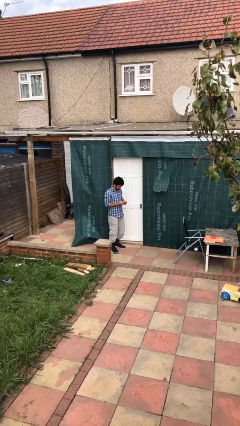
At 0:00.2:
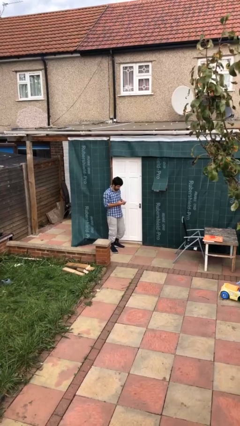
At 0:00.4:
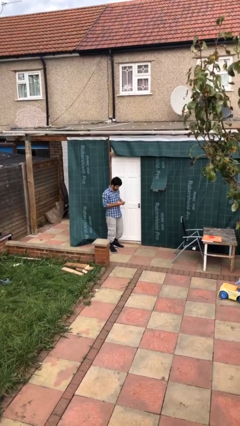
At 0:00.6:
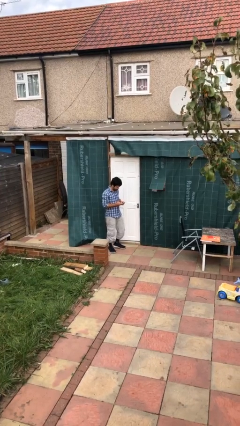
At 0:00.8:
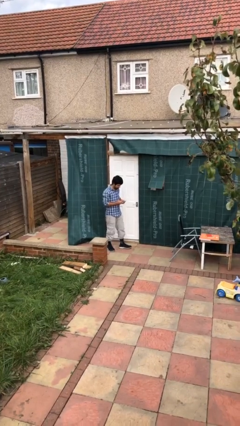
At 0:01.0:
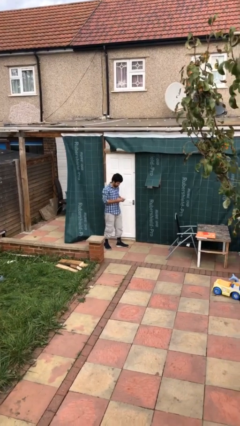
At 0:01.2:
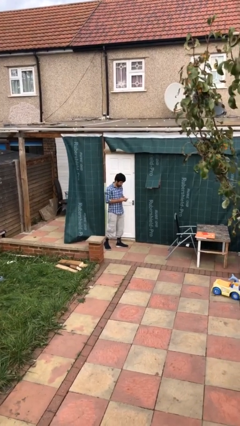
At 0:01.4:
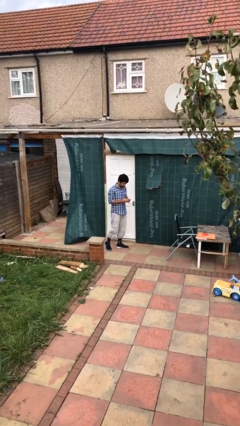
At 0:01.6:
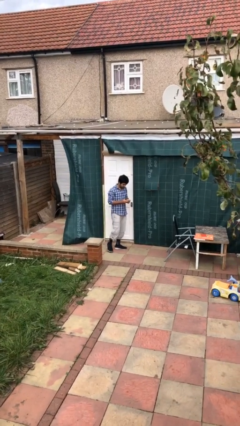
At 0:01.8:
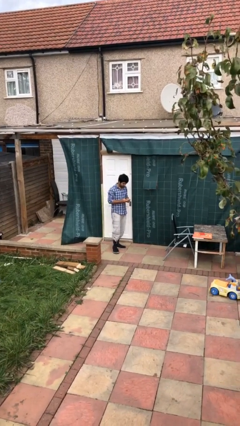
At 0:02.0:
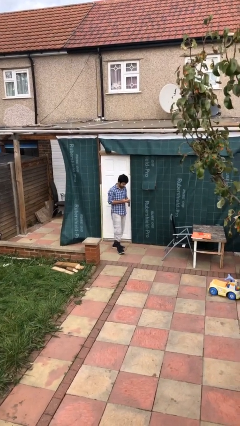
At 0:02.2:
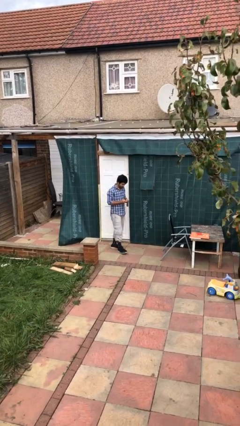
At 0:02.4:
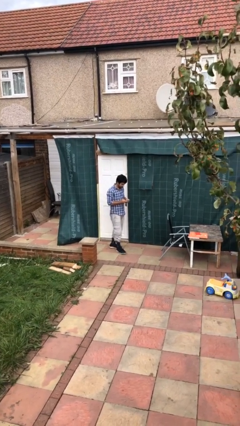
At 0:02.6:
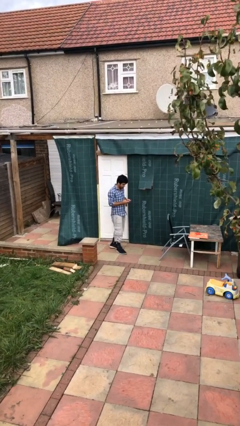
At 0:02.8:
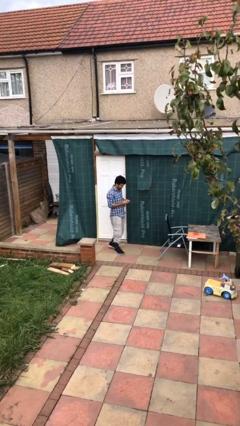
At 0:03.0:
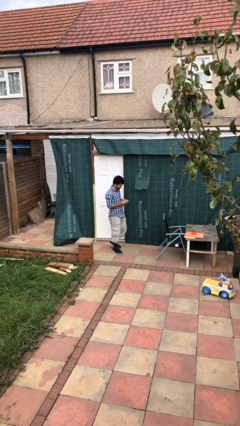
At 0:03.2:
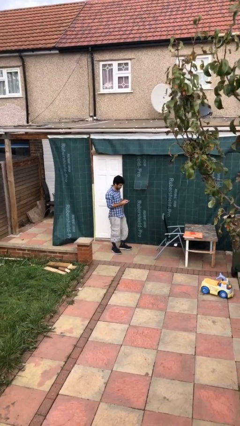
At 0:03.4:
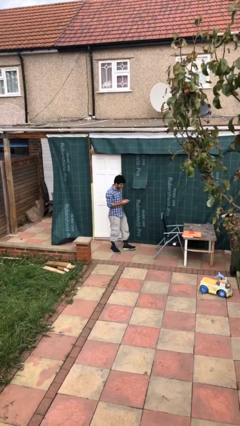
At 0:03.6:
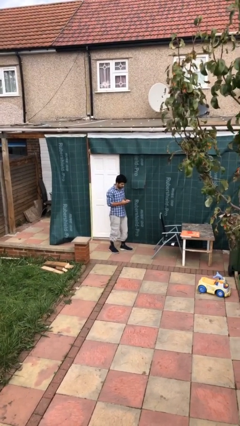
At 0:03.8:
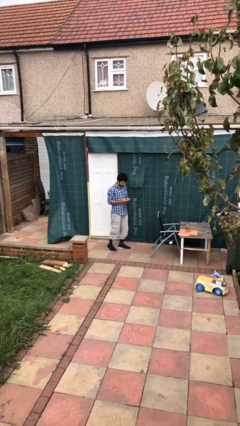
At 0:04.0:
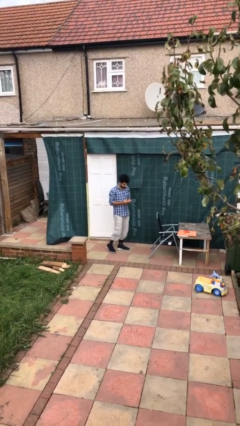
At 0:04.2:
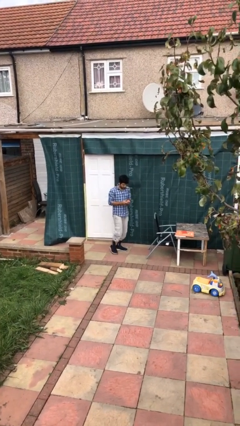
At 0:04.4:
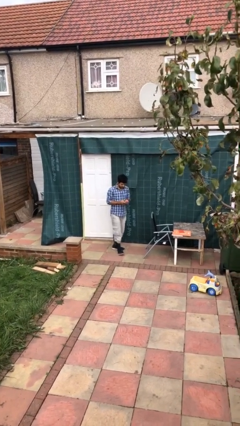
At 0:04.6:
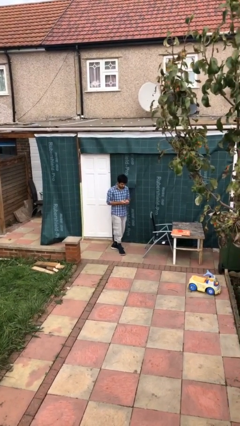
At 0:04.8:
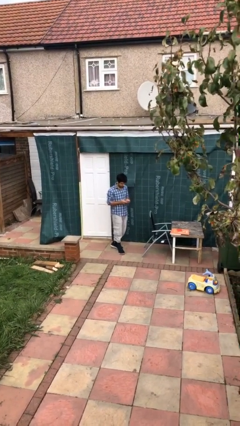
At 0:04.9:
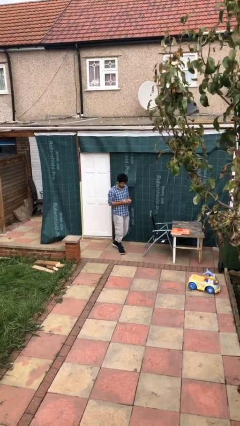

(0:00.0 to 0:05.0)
person texts on phone

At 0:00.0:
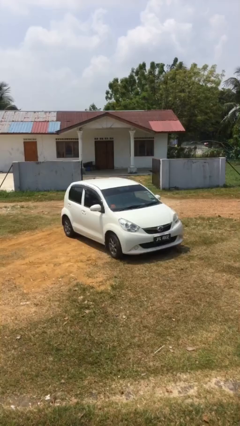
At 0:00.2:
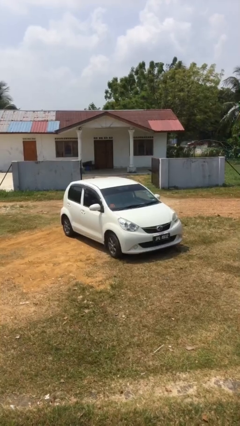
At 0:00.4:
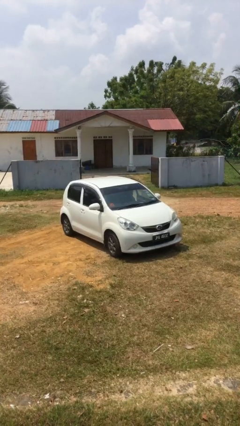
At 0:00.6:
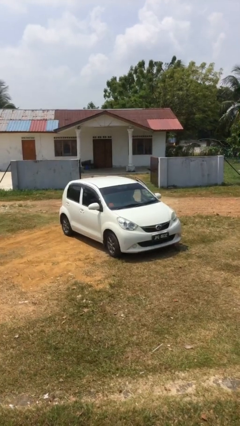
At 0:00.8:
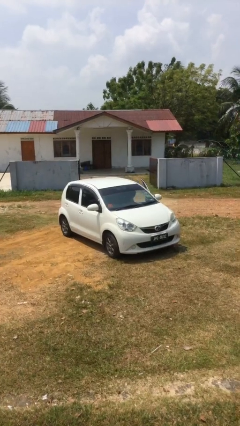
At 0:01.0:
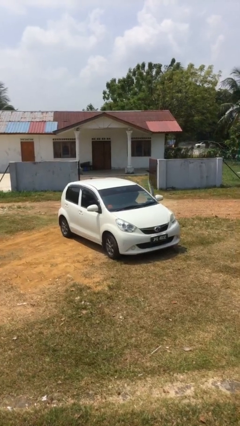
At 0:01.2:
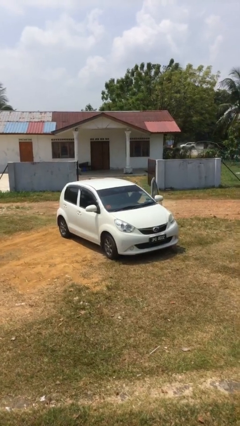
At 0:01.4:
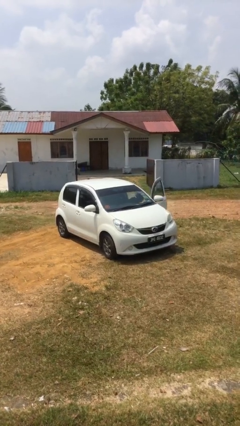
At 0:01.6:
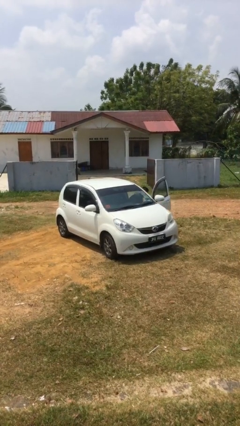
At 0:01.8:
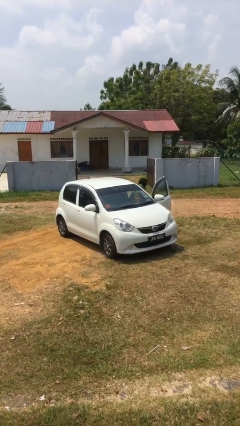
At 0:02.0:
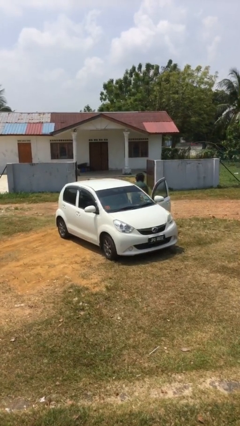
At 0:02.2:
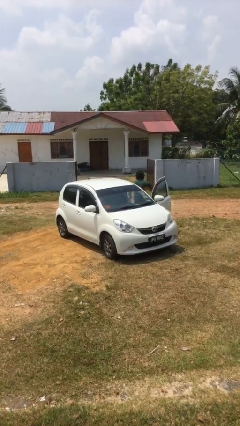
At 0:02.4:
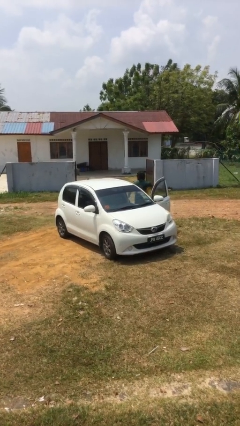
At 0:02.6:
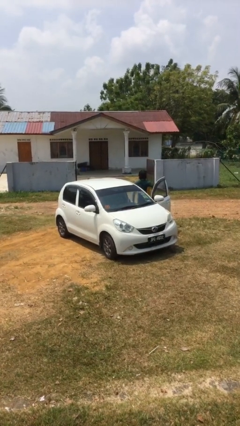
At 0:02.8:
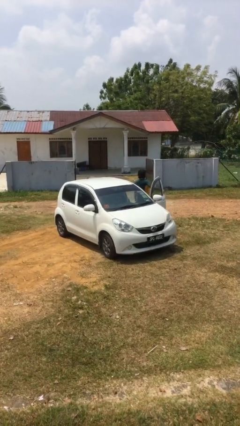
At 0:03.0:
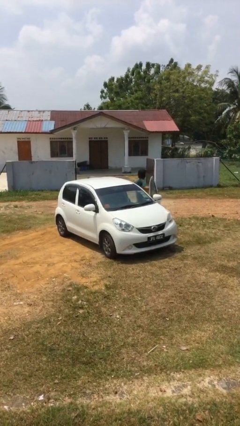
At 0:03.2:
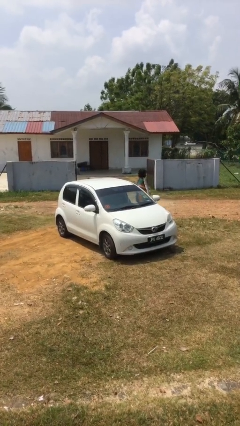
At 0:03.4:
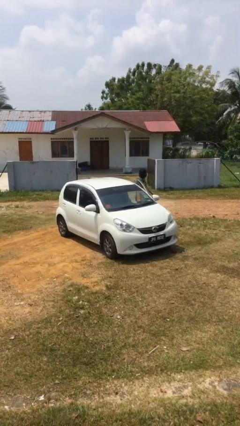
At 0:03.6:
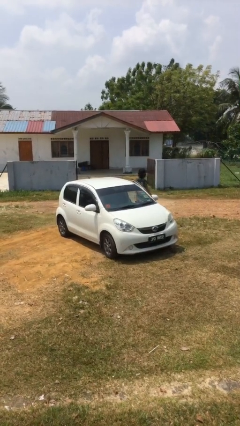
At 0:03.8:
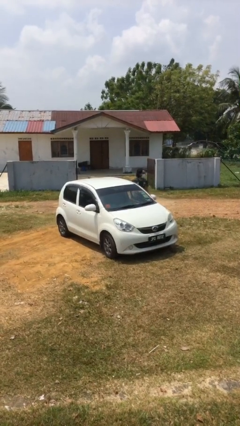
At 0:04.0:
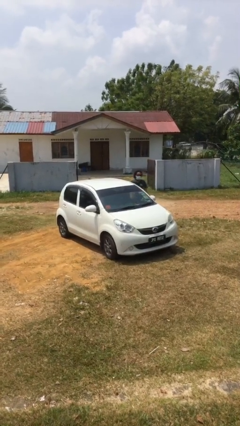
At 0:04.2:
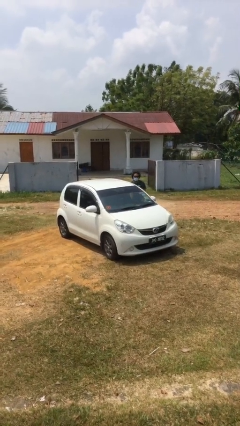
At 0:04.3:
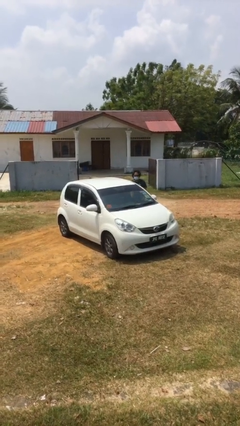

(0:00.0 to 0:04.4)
car drops off person

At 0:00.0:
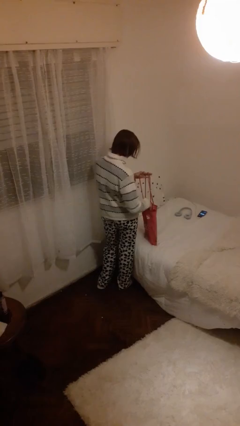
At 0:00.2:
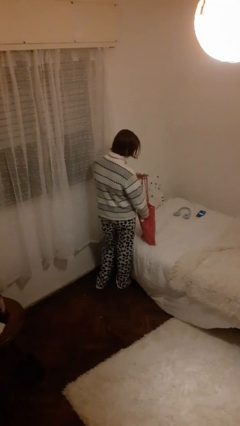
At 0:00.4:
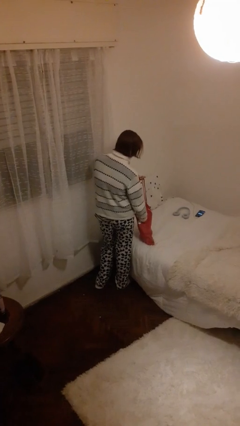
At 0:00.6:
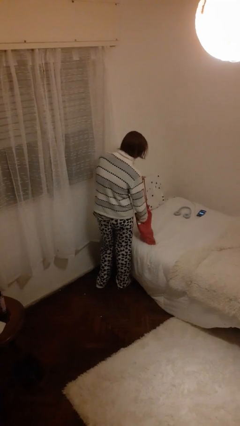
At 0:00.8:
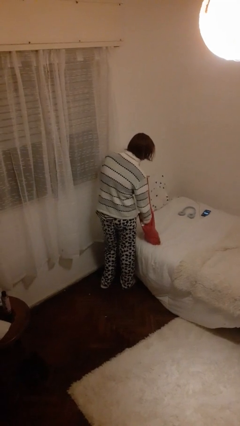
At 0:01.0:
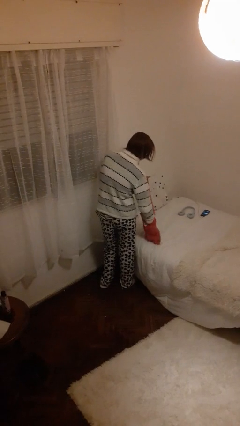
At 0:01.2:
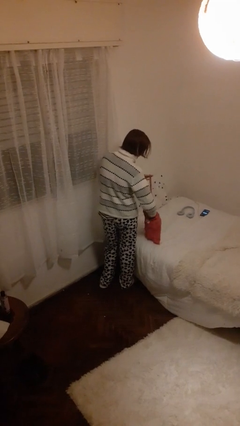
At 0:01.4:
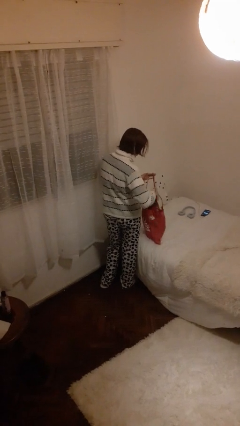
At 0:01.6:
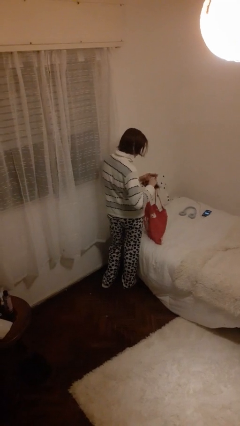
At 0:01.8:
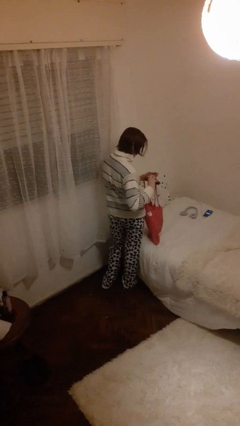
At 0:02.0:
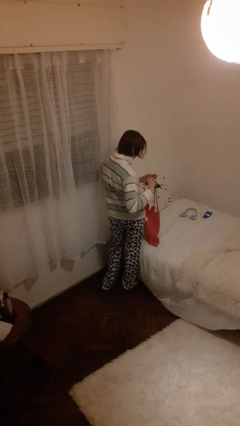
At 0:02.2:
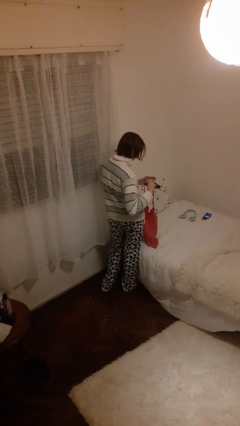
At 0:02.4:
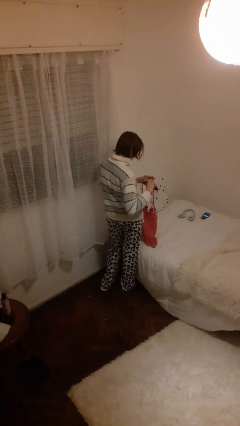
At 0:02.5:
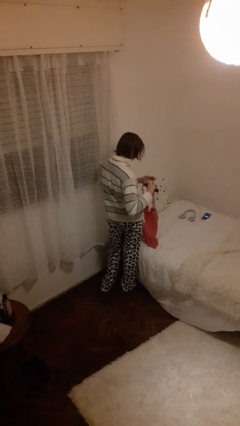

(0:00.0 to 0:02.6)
person takes object from bag

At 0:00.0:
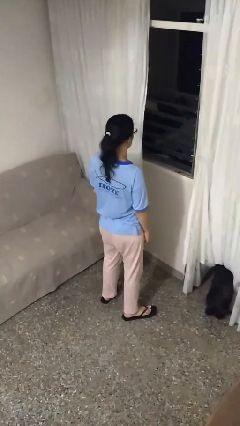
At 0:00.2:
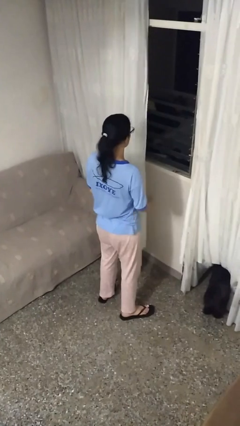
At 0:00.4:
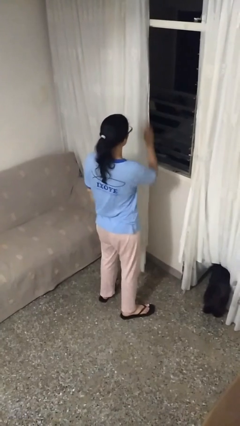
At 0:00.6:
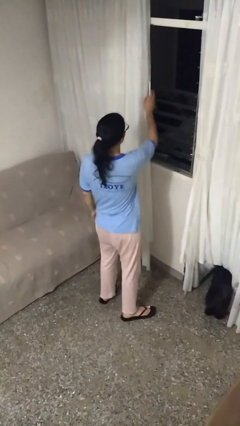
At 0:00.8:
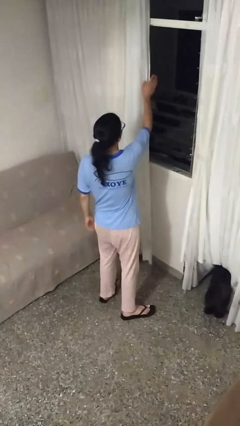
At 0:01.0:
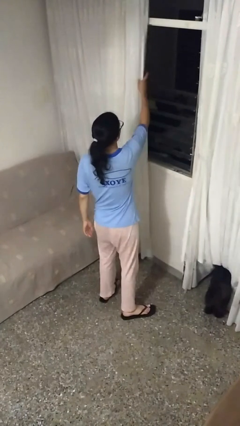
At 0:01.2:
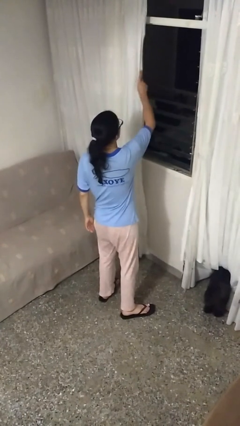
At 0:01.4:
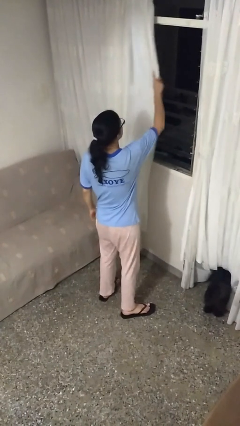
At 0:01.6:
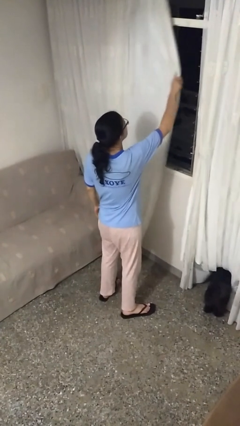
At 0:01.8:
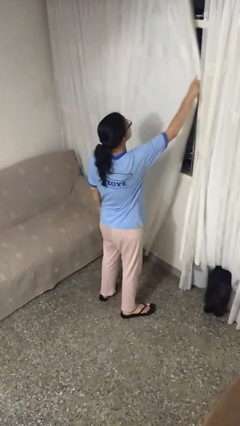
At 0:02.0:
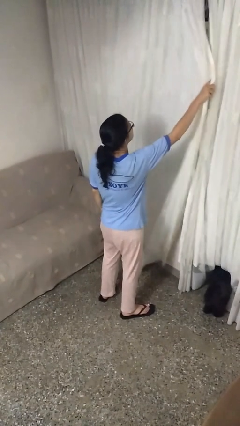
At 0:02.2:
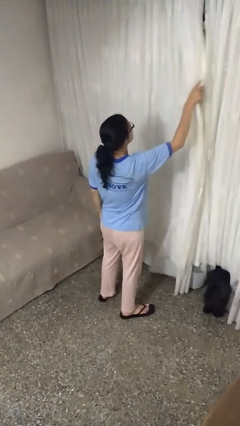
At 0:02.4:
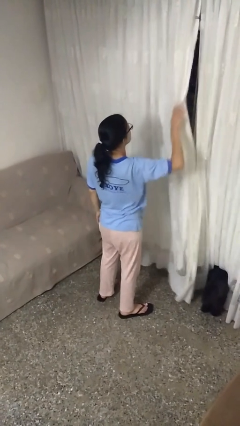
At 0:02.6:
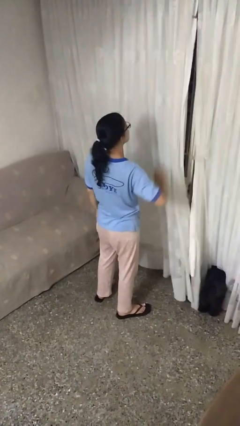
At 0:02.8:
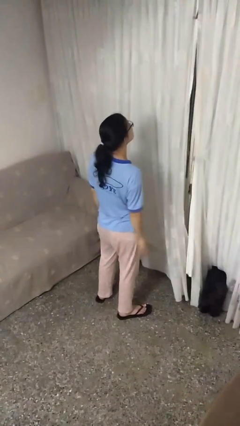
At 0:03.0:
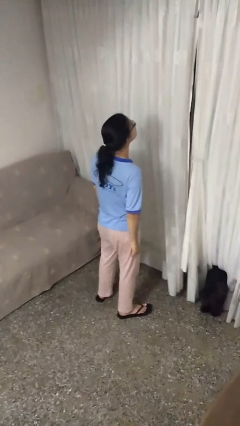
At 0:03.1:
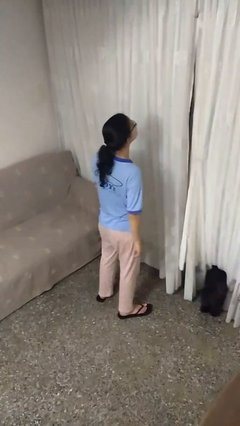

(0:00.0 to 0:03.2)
person closes curtains

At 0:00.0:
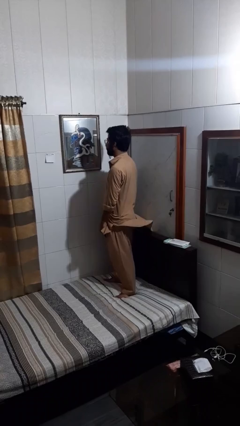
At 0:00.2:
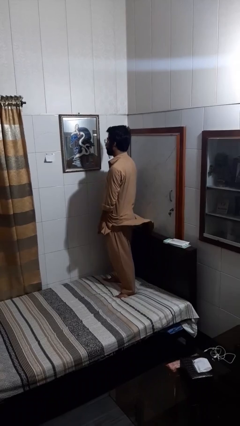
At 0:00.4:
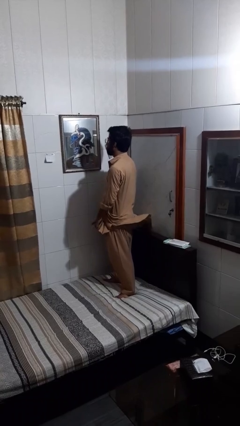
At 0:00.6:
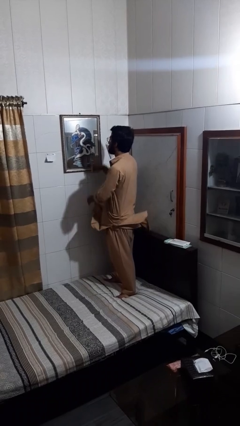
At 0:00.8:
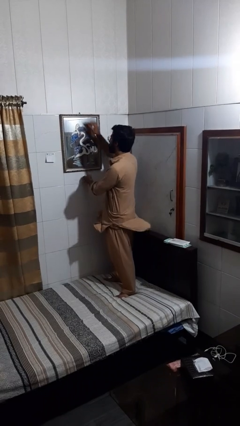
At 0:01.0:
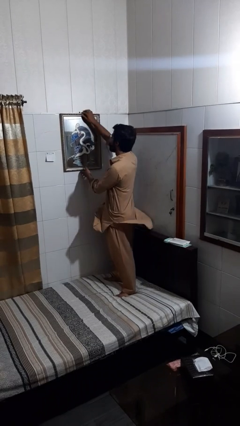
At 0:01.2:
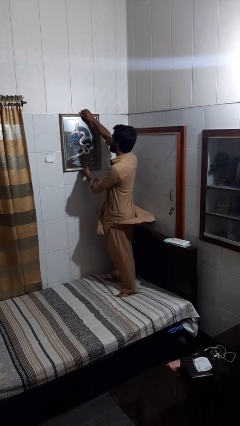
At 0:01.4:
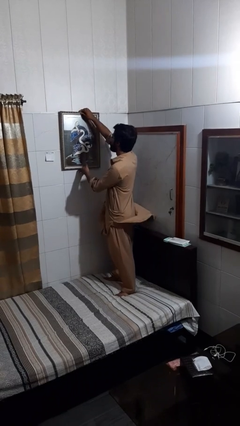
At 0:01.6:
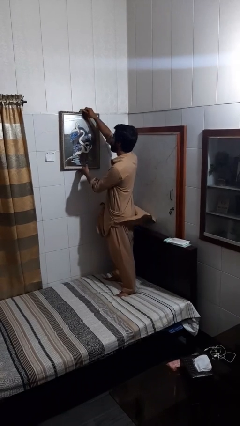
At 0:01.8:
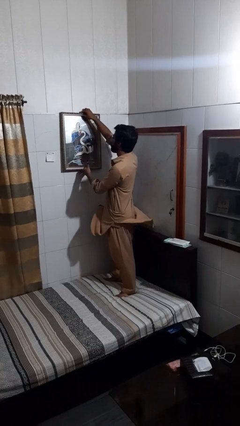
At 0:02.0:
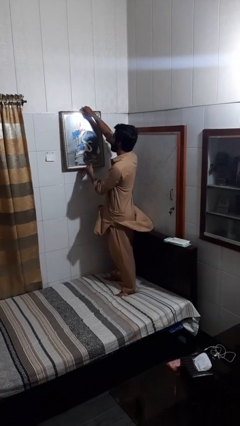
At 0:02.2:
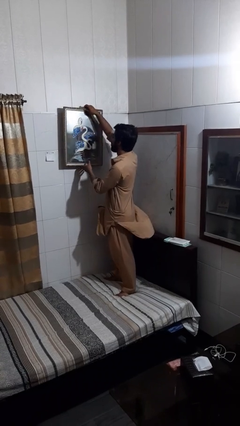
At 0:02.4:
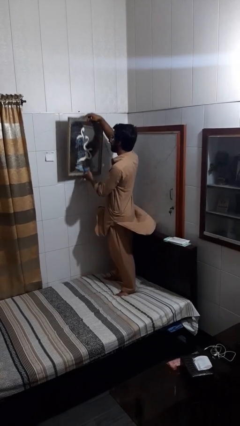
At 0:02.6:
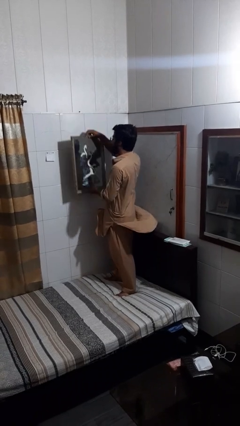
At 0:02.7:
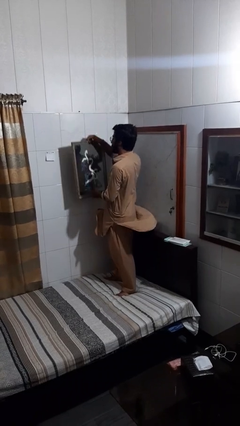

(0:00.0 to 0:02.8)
person takes down picture frame
